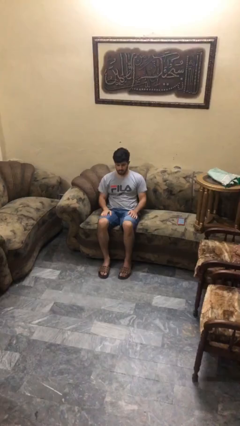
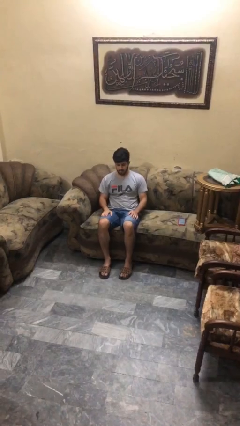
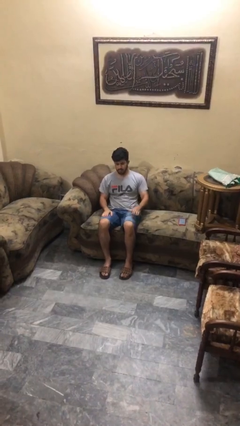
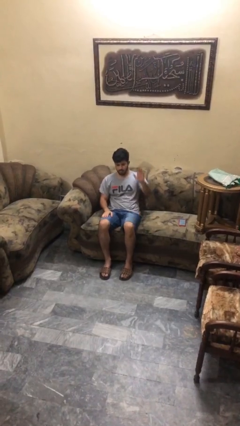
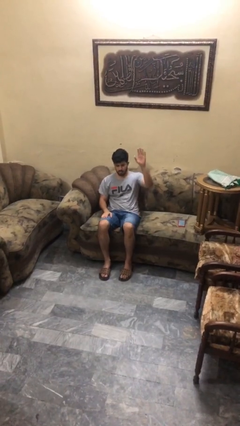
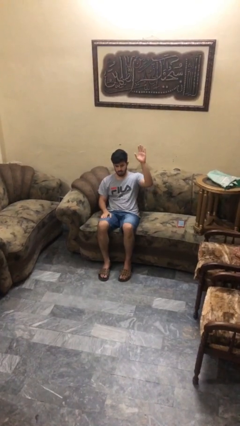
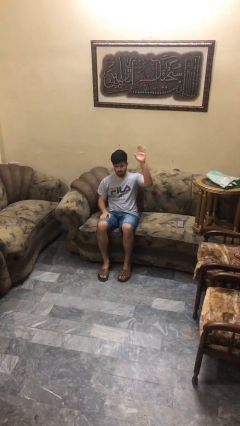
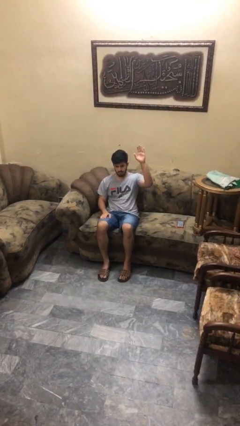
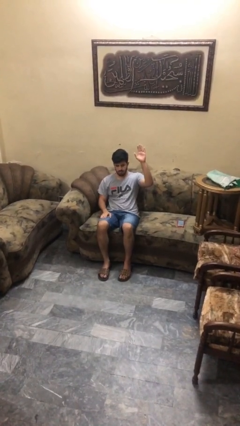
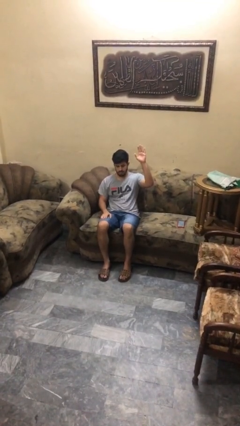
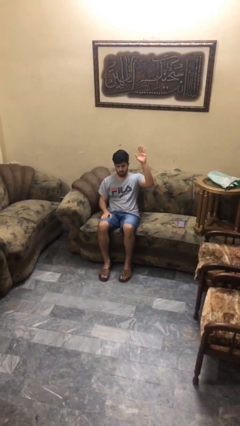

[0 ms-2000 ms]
person gestures raise hand

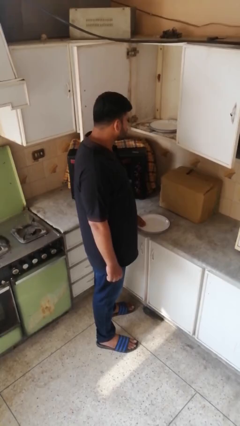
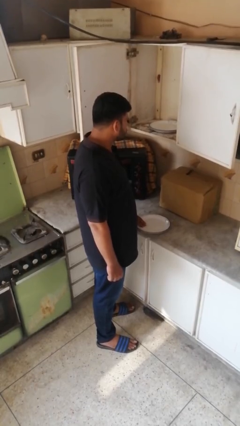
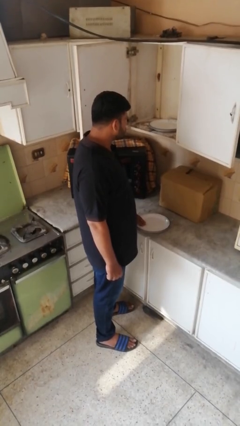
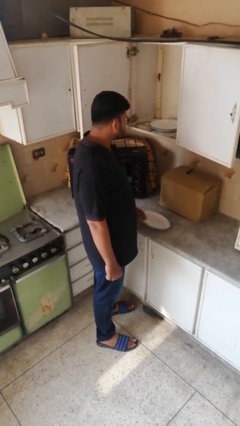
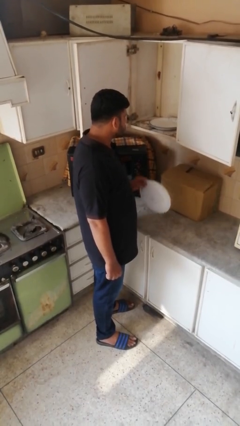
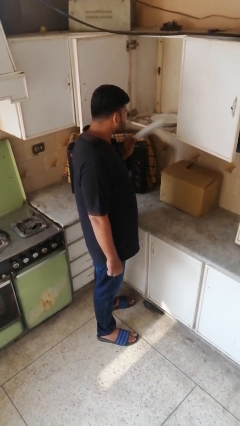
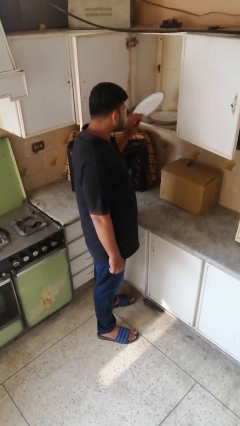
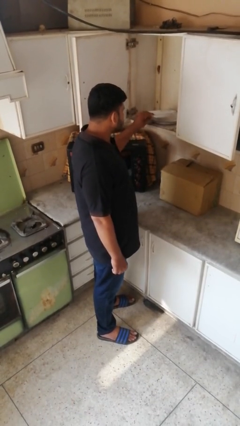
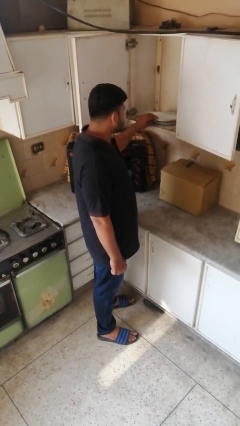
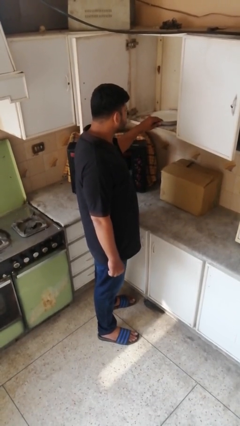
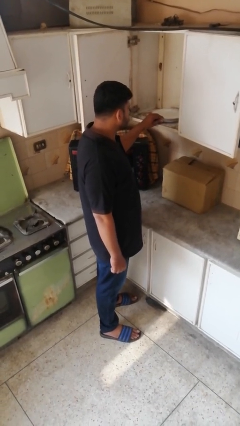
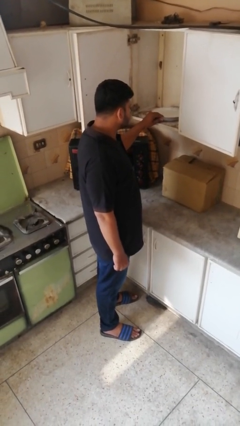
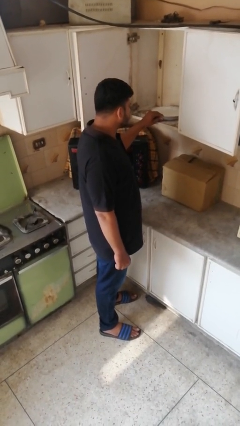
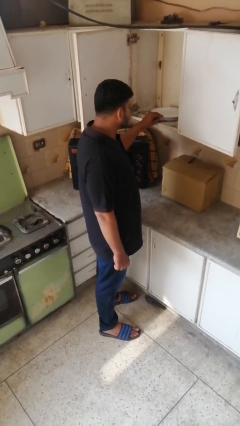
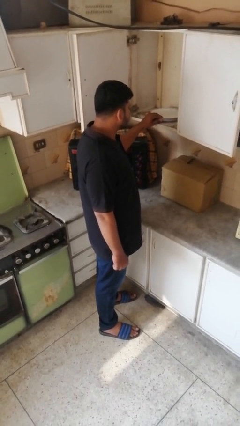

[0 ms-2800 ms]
person puts object in cabinet

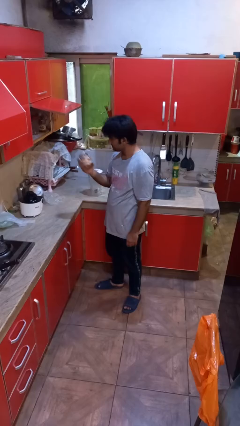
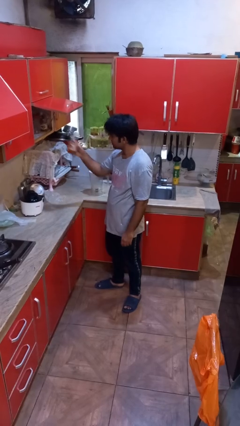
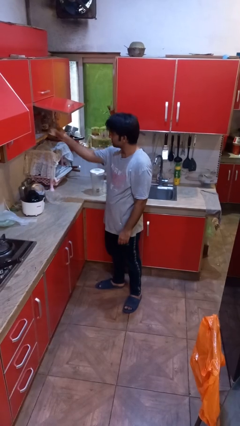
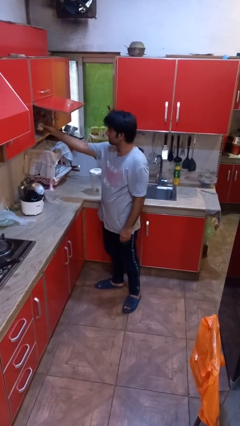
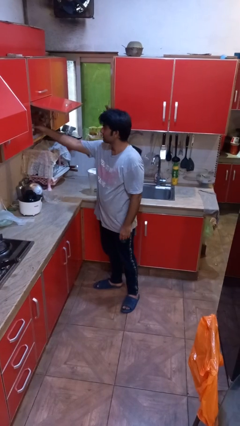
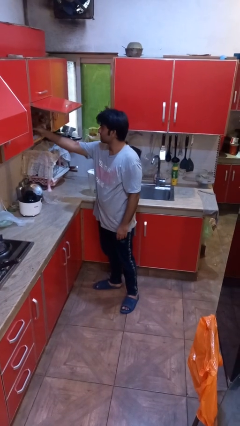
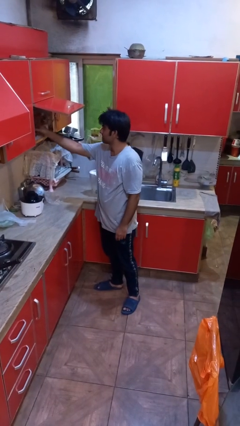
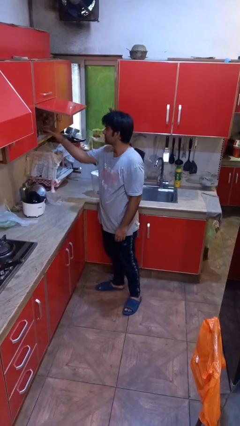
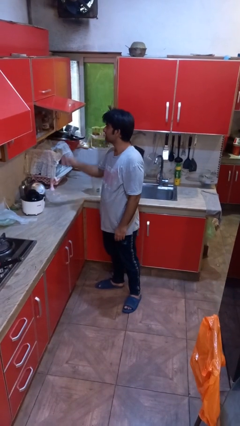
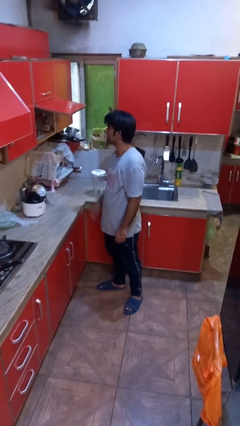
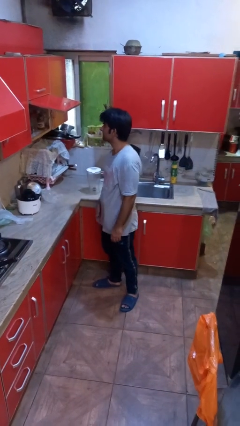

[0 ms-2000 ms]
person puts down object into cabinet

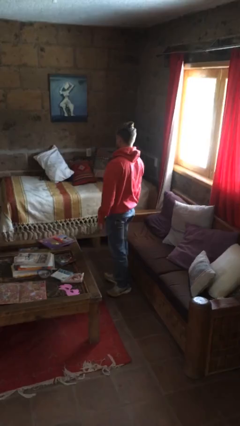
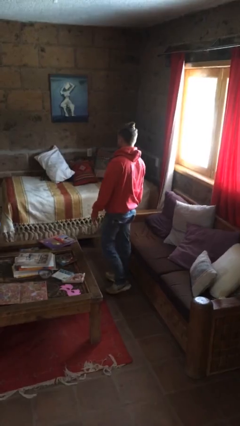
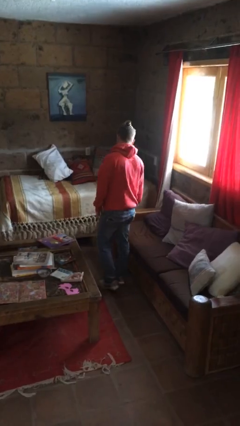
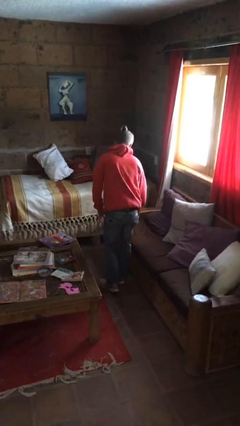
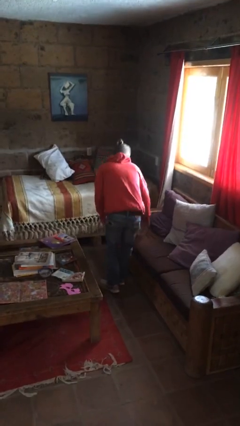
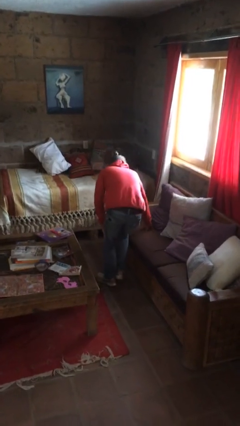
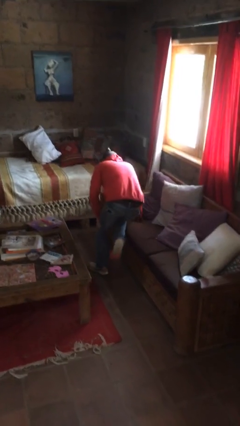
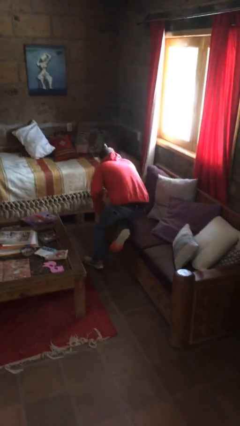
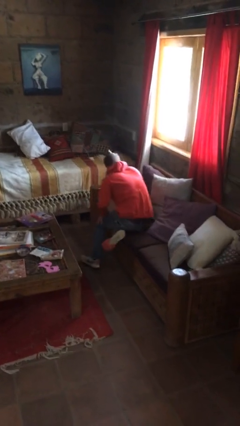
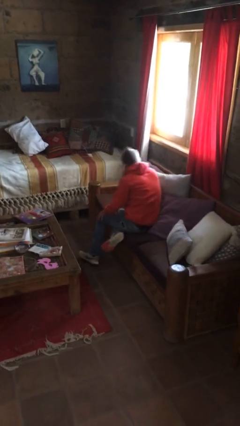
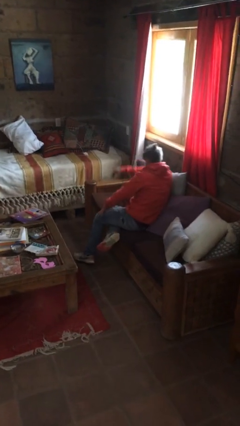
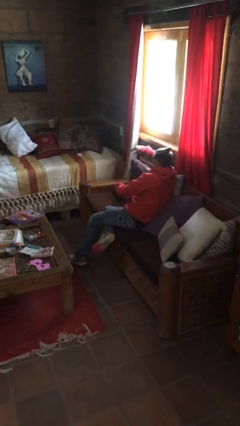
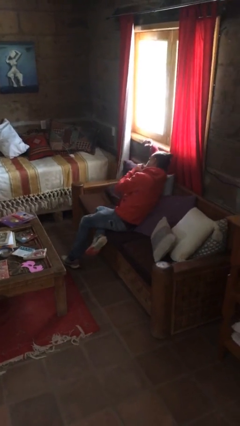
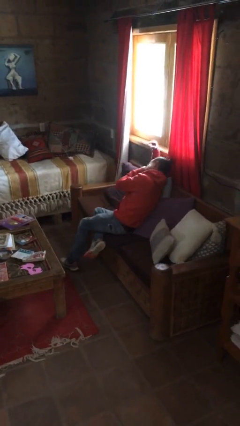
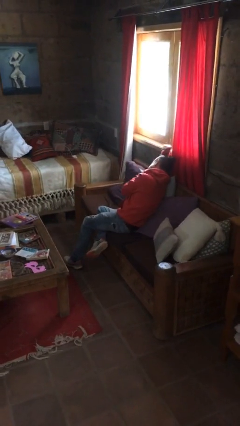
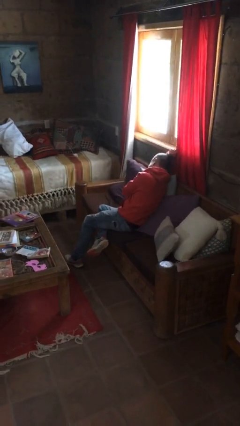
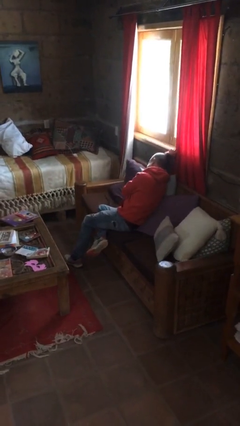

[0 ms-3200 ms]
person lies down on couch

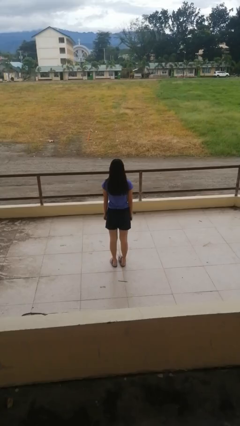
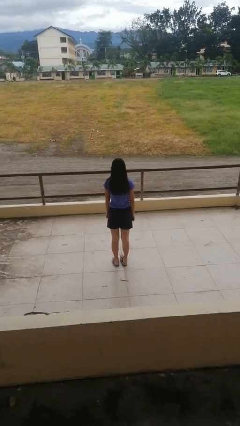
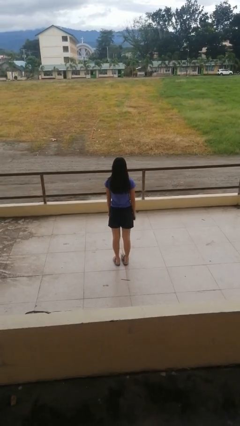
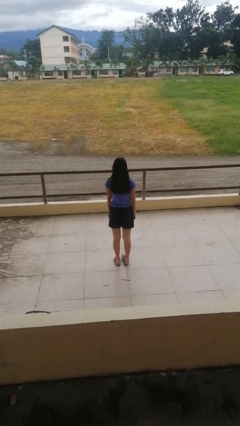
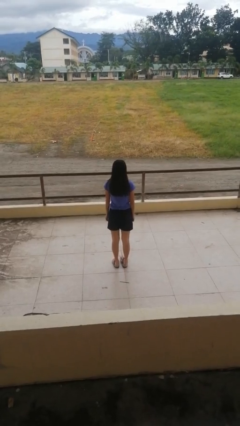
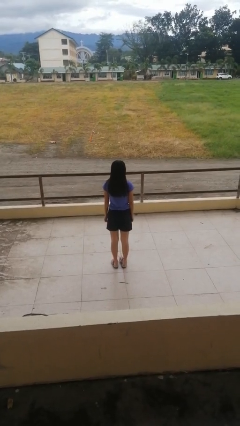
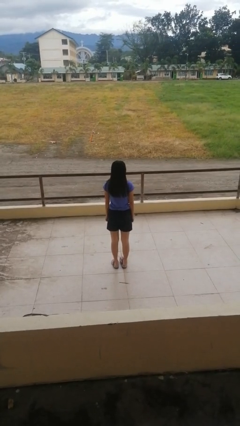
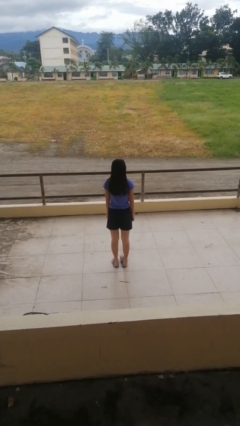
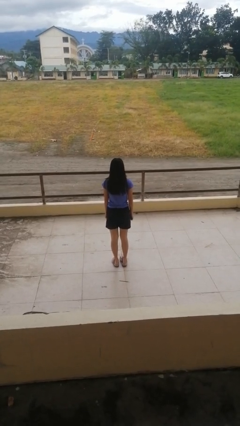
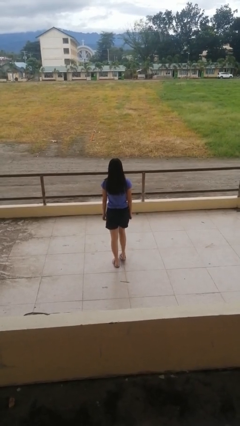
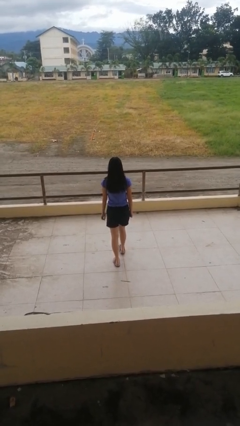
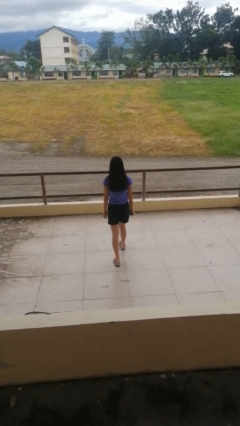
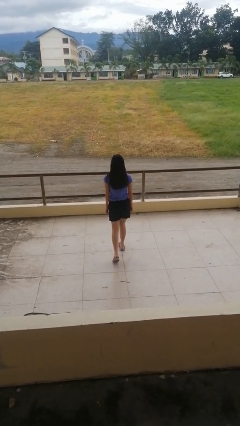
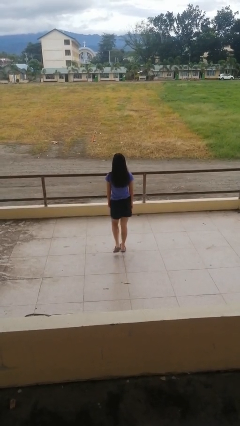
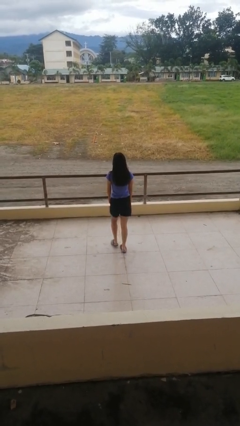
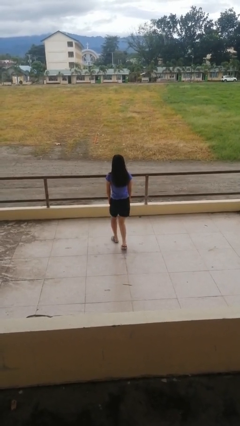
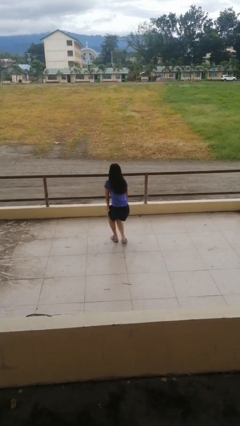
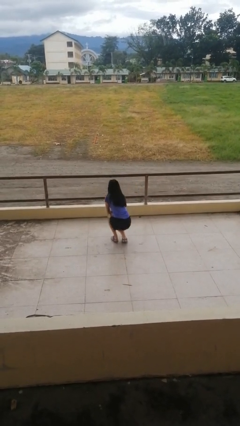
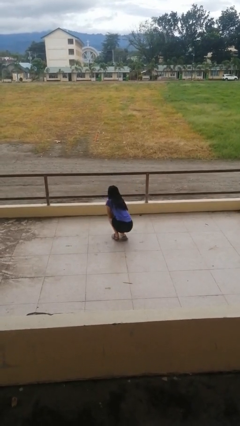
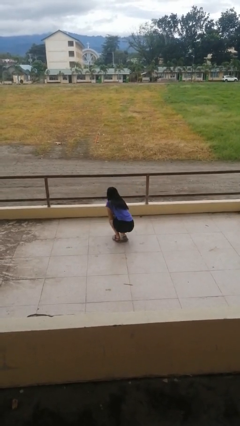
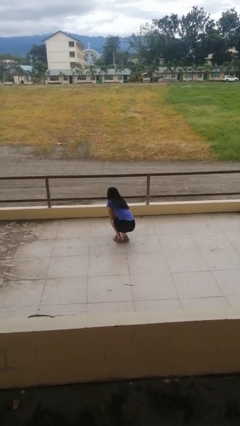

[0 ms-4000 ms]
person trips on object on floor

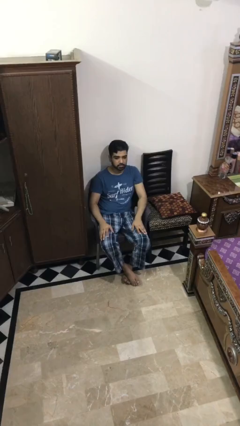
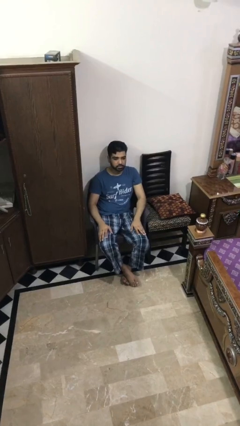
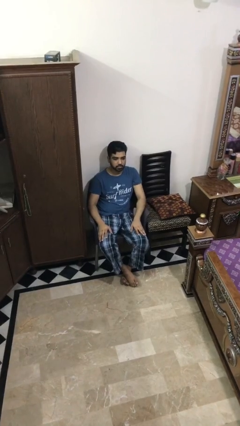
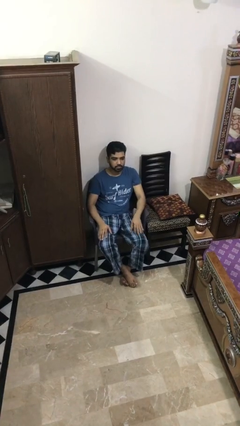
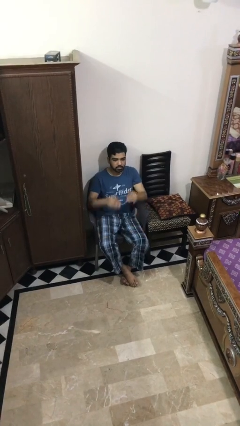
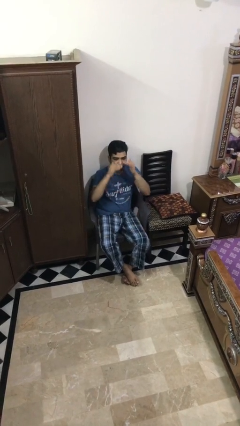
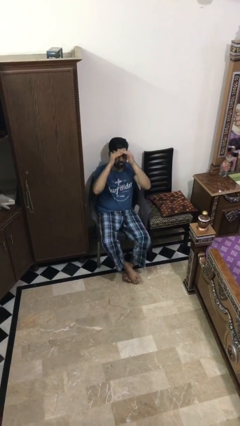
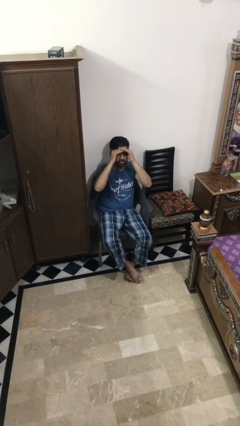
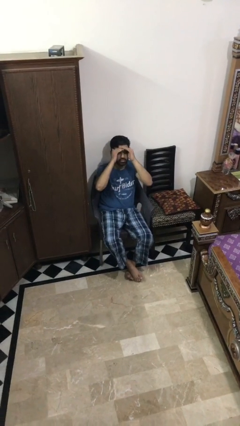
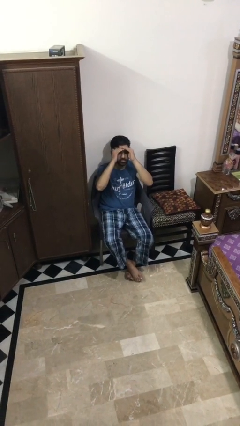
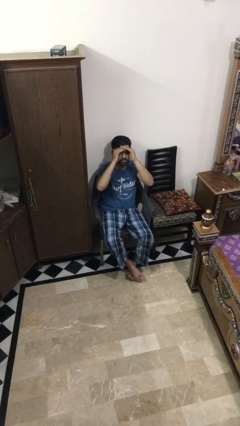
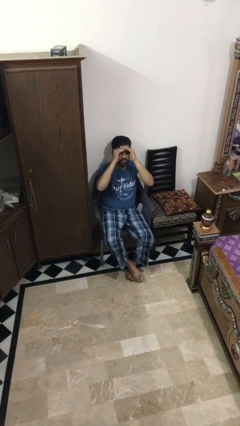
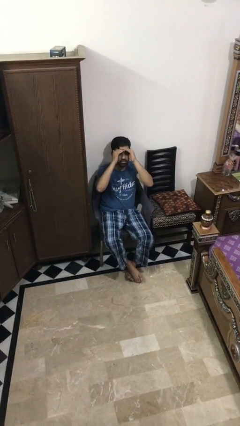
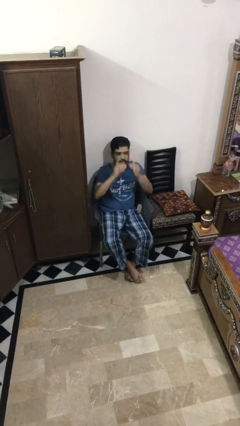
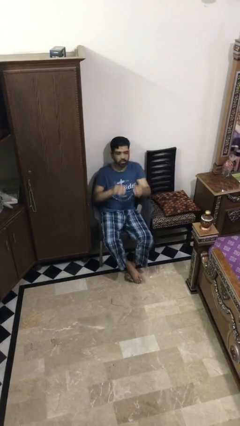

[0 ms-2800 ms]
person shades eyes
